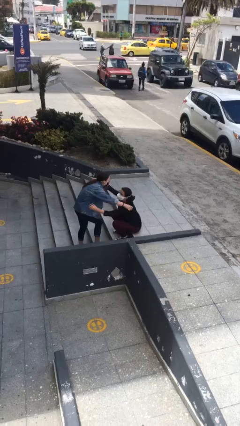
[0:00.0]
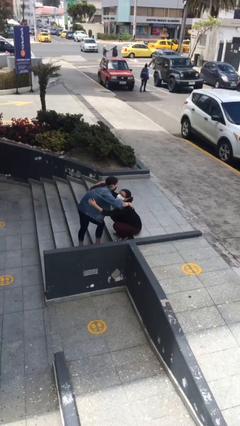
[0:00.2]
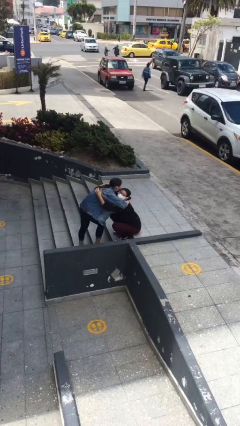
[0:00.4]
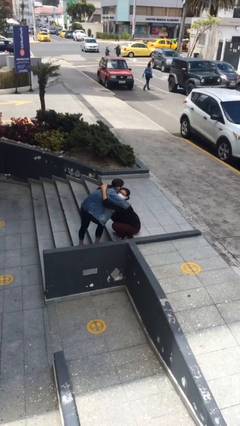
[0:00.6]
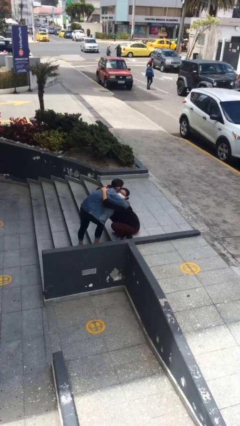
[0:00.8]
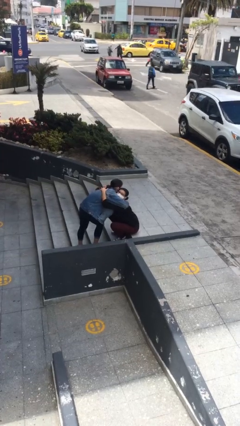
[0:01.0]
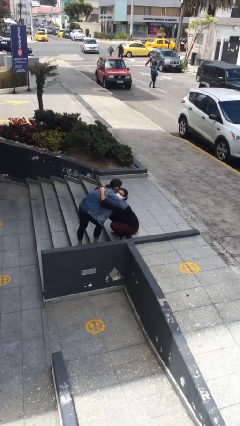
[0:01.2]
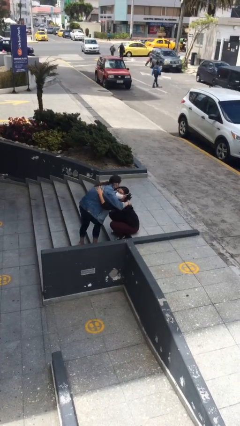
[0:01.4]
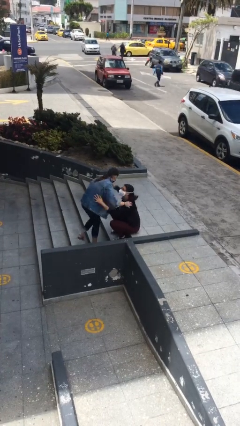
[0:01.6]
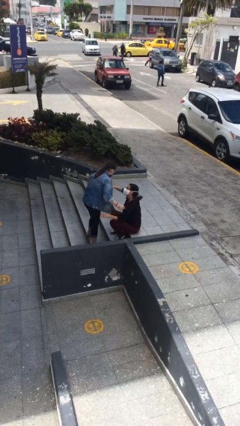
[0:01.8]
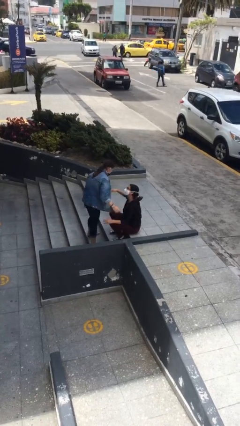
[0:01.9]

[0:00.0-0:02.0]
person embraces person

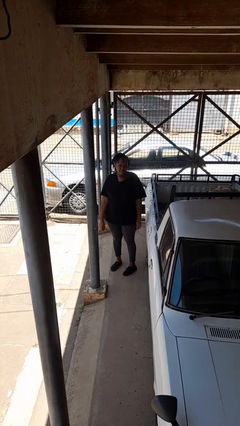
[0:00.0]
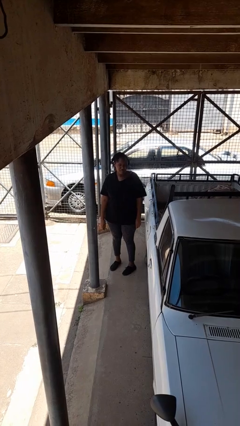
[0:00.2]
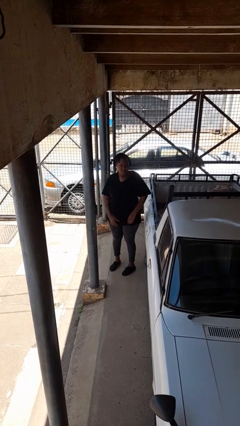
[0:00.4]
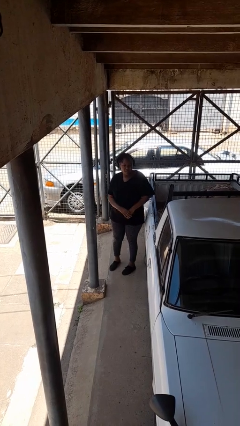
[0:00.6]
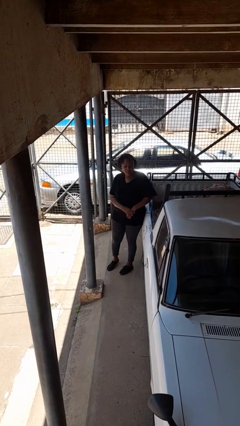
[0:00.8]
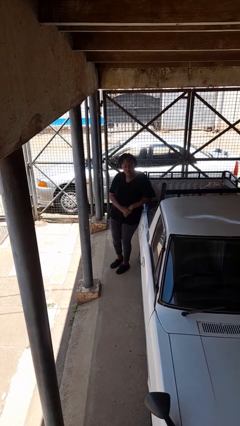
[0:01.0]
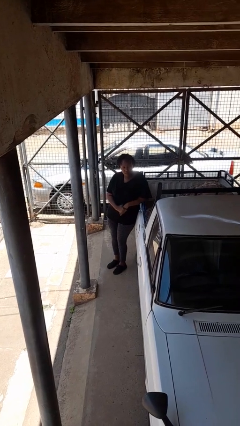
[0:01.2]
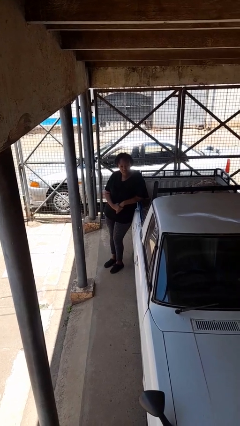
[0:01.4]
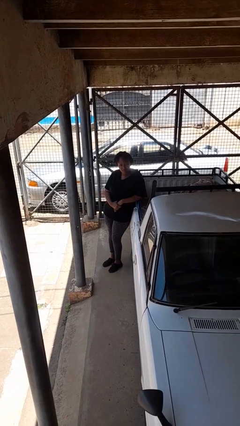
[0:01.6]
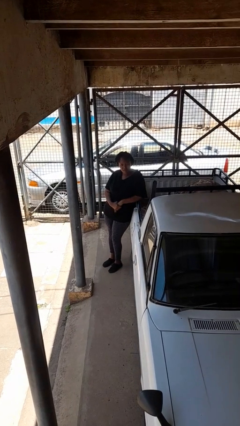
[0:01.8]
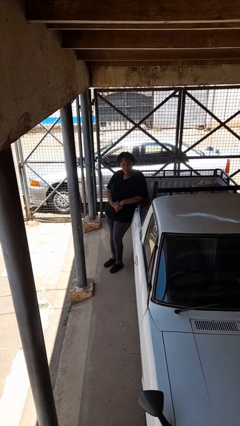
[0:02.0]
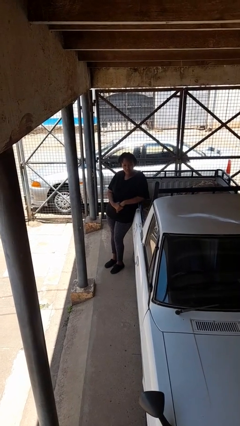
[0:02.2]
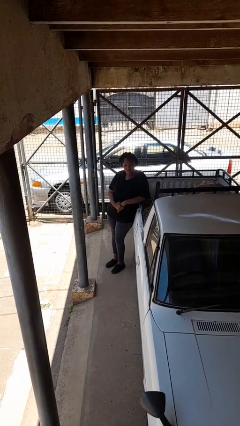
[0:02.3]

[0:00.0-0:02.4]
person leans against car

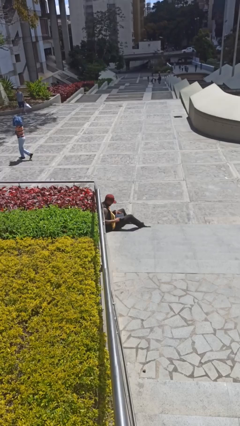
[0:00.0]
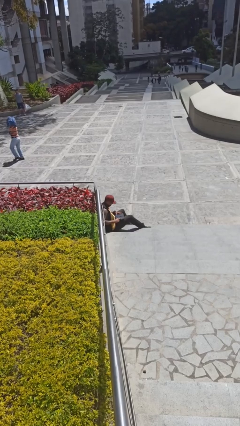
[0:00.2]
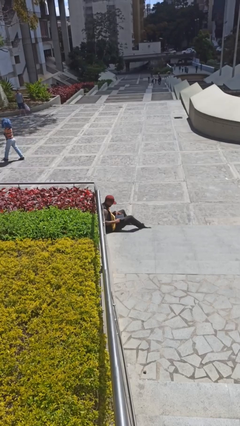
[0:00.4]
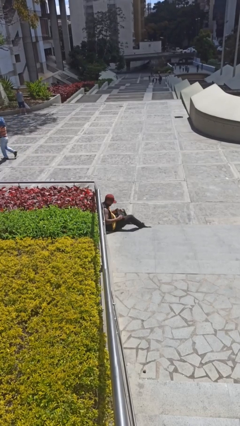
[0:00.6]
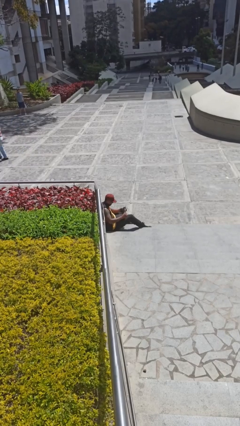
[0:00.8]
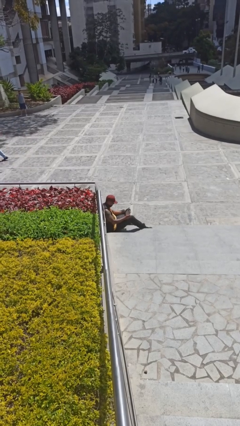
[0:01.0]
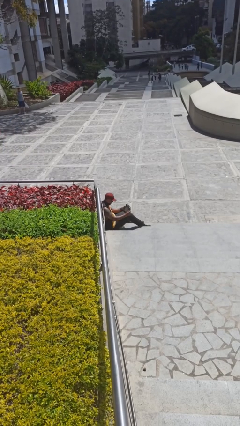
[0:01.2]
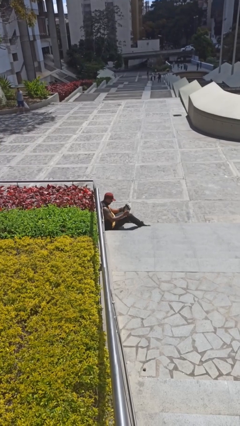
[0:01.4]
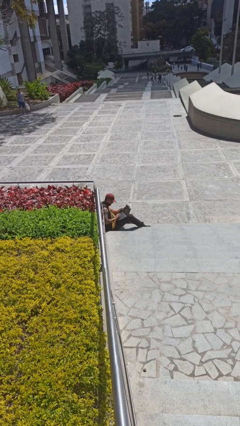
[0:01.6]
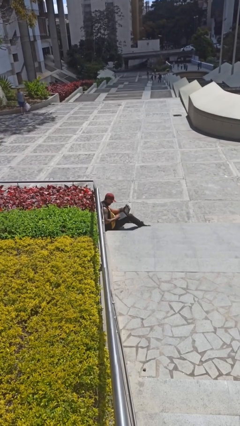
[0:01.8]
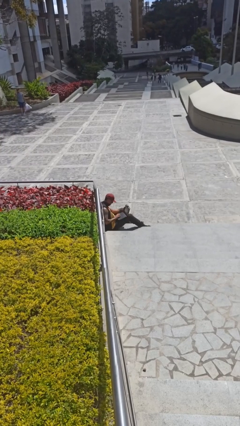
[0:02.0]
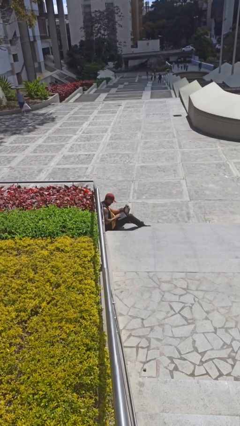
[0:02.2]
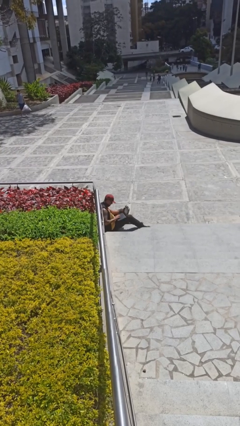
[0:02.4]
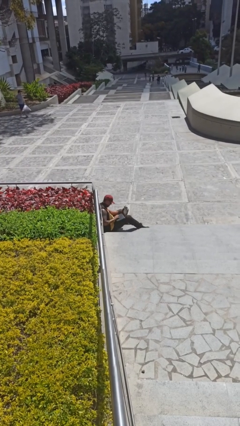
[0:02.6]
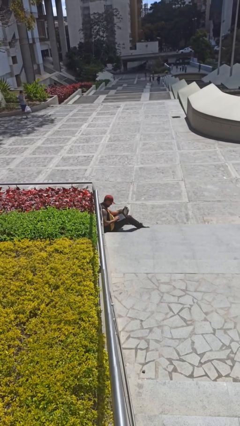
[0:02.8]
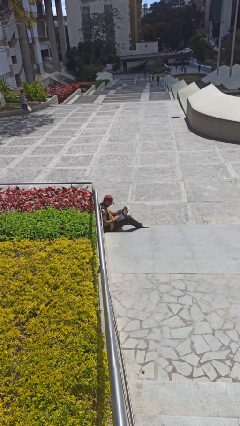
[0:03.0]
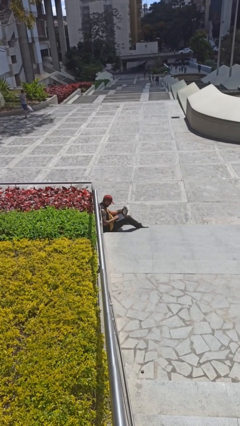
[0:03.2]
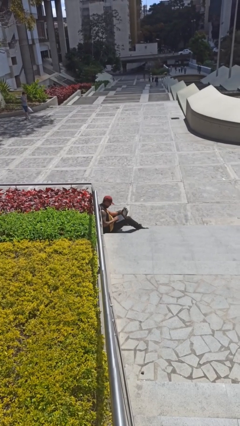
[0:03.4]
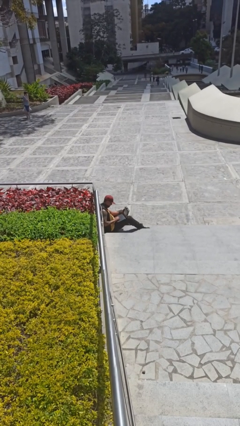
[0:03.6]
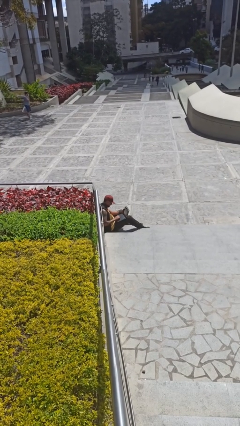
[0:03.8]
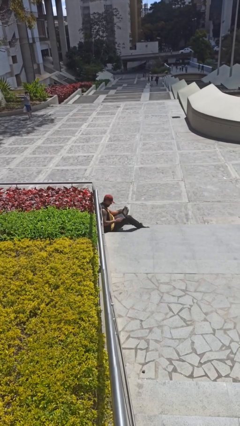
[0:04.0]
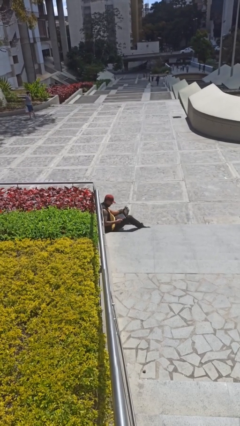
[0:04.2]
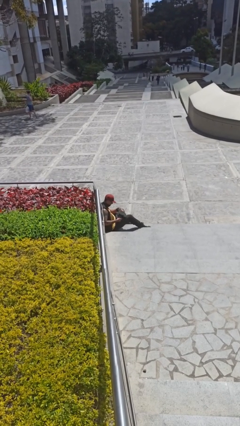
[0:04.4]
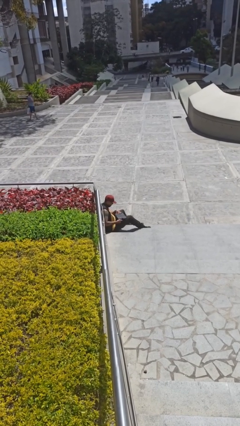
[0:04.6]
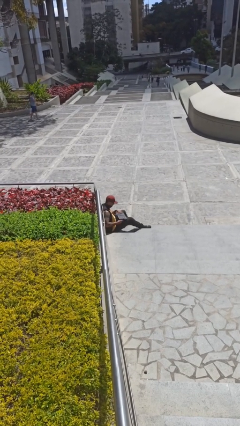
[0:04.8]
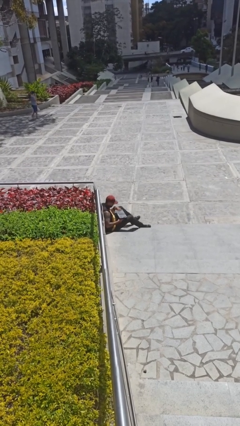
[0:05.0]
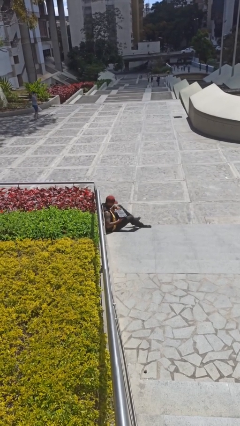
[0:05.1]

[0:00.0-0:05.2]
person interacts with laptop

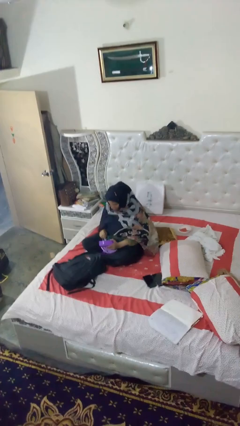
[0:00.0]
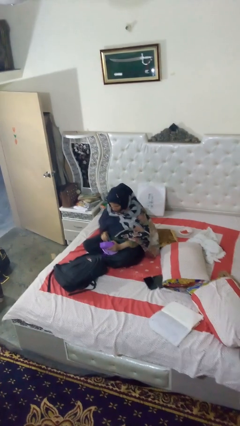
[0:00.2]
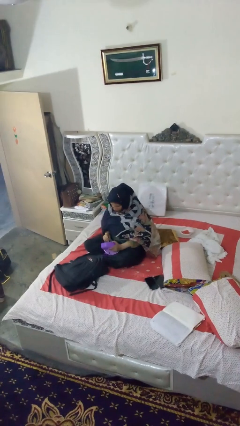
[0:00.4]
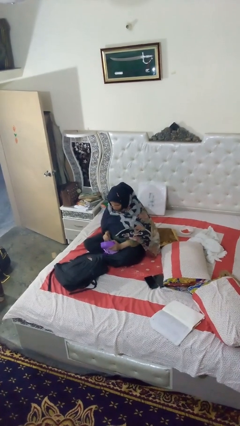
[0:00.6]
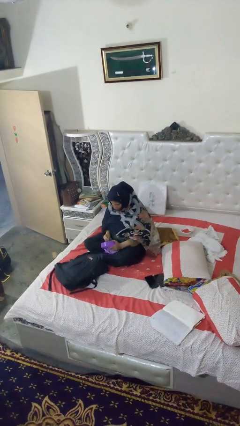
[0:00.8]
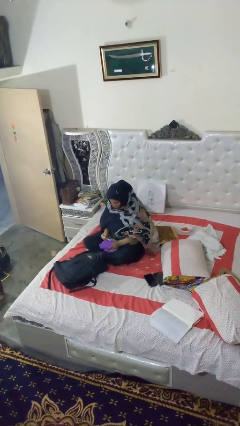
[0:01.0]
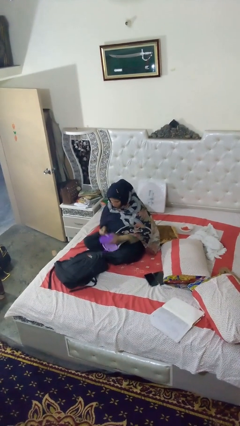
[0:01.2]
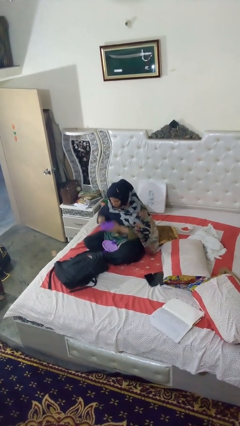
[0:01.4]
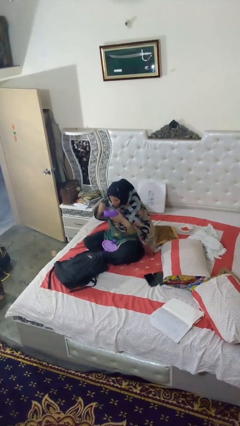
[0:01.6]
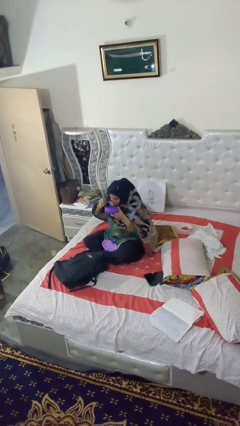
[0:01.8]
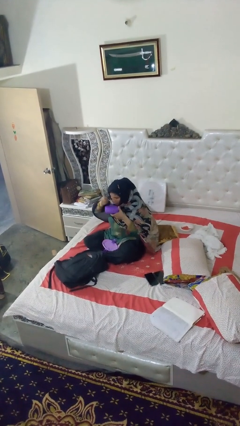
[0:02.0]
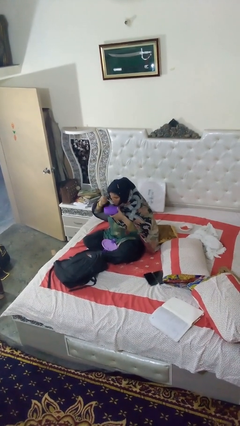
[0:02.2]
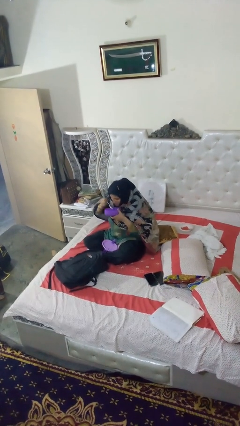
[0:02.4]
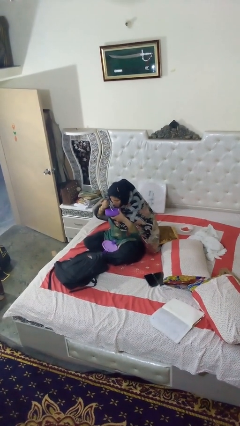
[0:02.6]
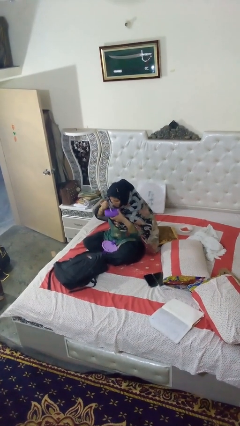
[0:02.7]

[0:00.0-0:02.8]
person eats snack from bag

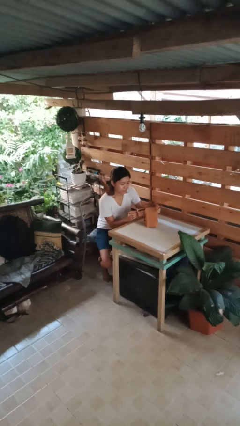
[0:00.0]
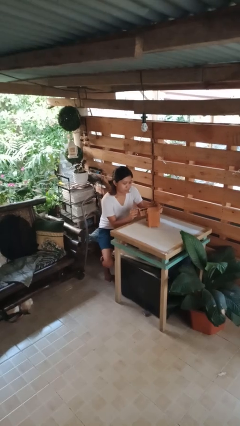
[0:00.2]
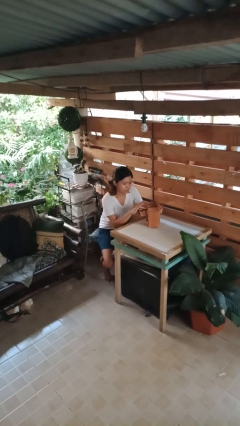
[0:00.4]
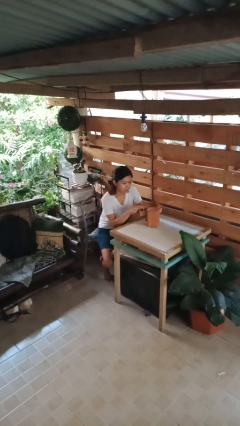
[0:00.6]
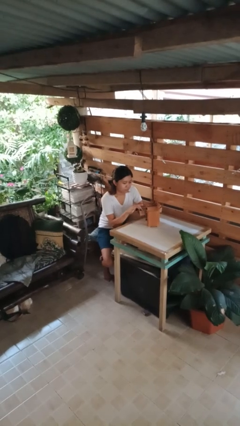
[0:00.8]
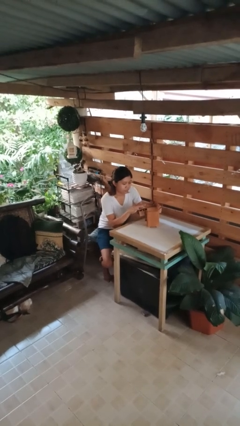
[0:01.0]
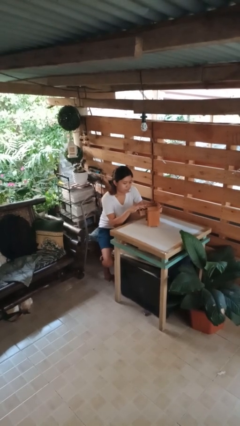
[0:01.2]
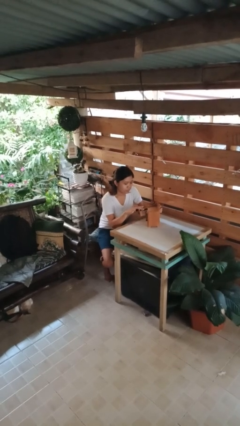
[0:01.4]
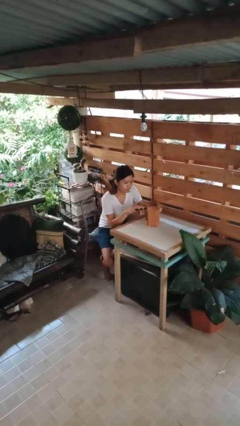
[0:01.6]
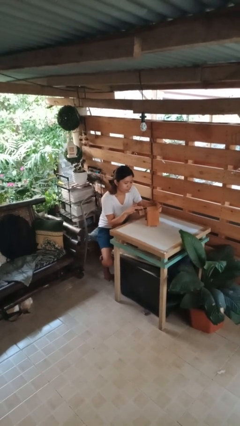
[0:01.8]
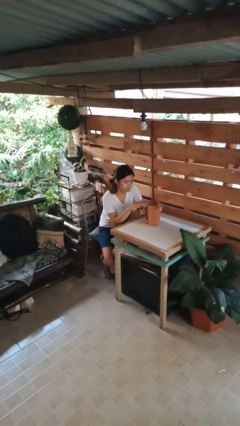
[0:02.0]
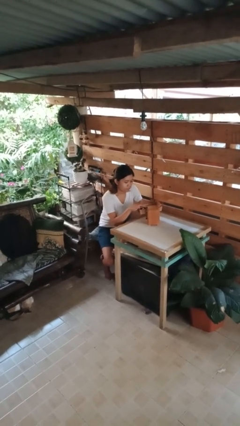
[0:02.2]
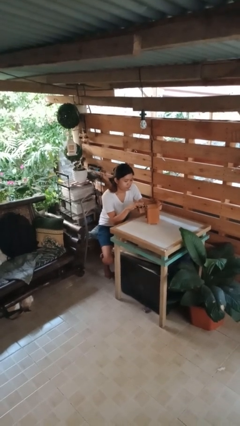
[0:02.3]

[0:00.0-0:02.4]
person searches jewelry box

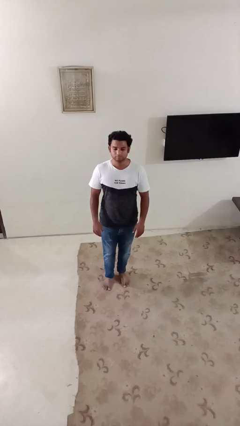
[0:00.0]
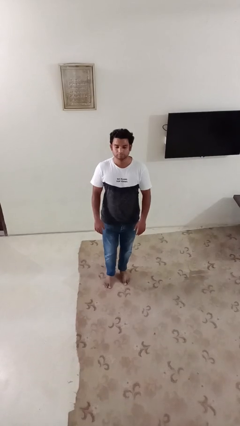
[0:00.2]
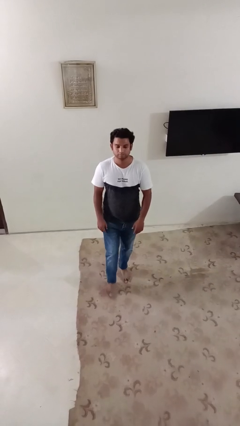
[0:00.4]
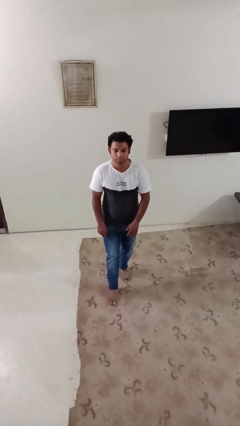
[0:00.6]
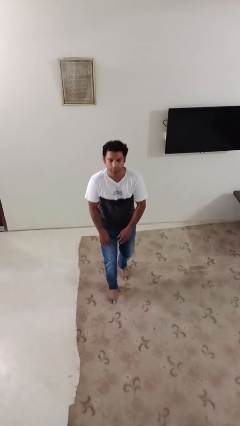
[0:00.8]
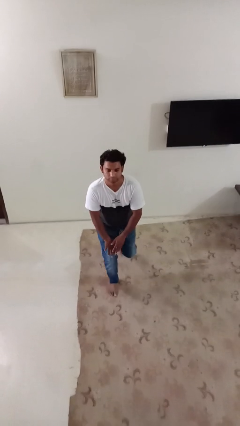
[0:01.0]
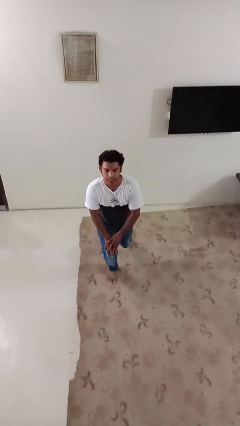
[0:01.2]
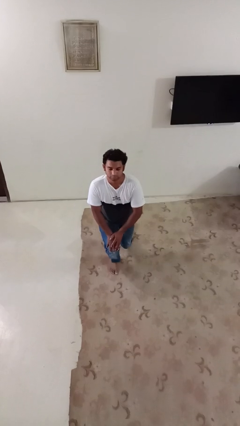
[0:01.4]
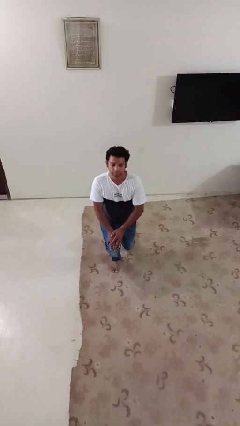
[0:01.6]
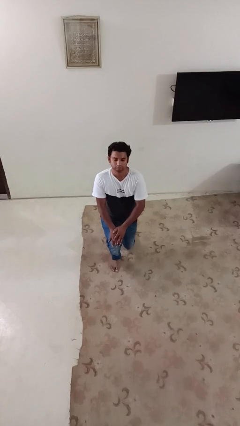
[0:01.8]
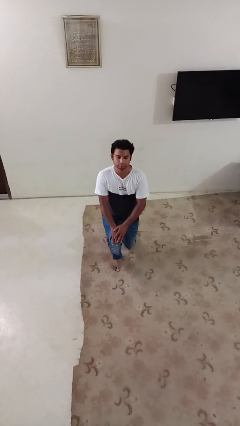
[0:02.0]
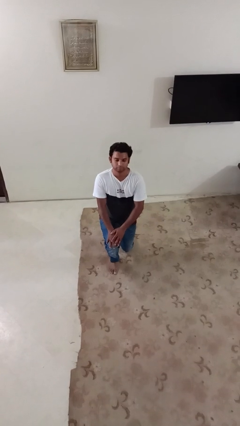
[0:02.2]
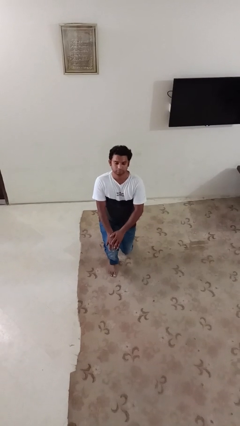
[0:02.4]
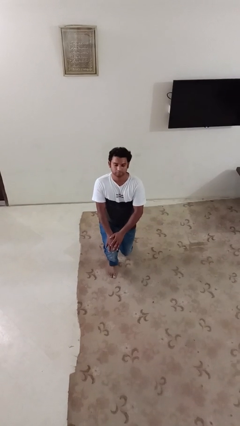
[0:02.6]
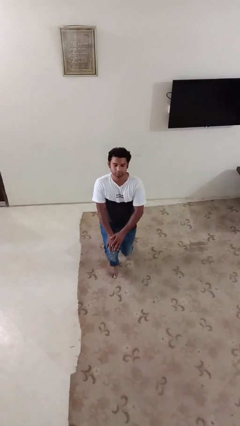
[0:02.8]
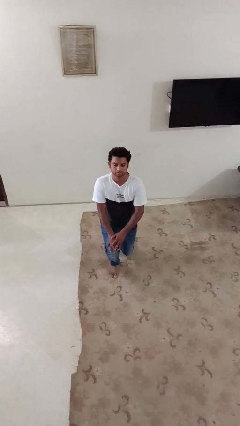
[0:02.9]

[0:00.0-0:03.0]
person kneels
